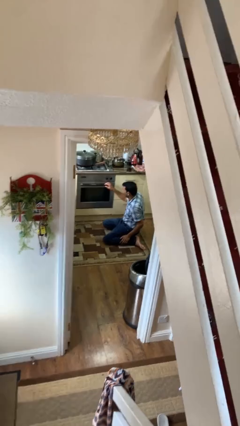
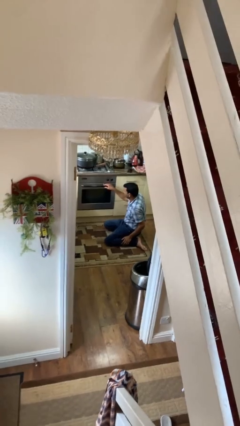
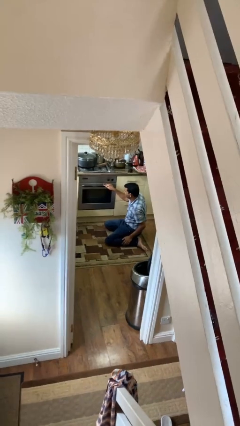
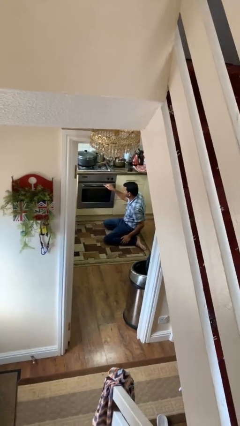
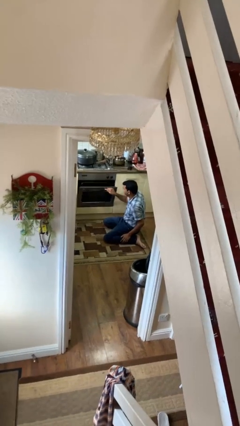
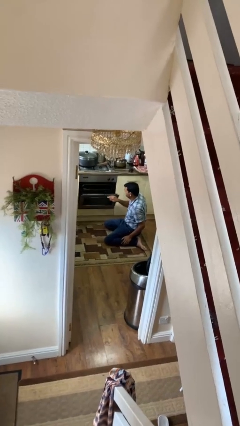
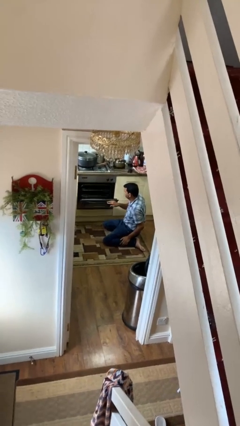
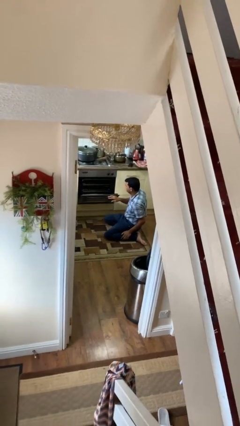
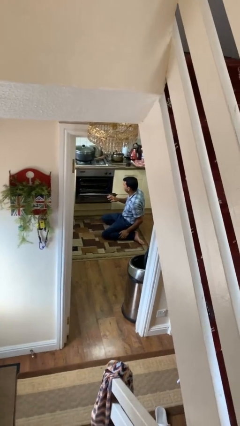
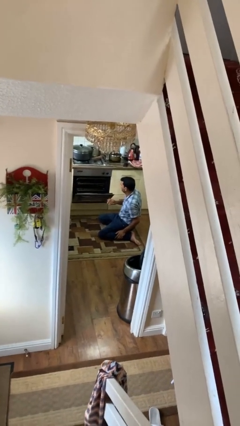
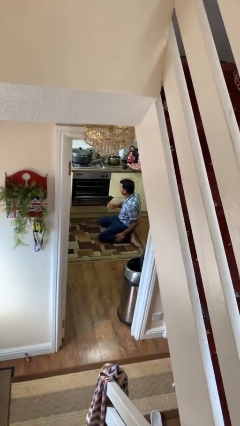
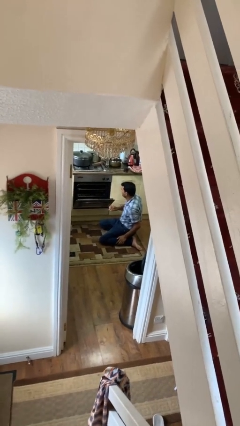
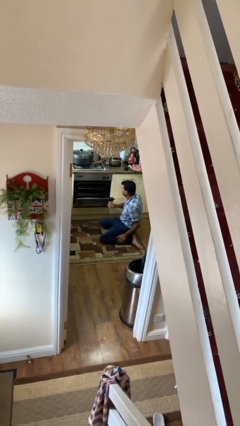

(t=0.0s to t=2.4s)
person opens oven door

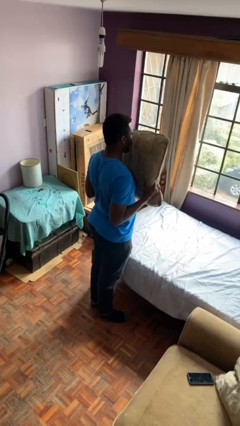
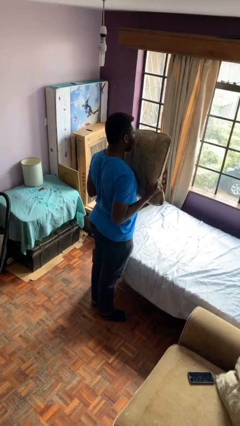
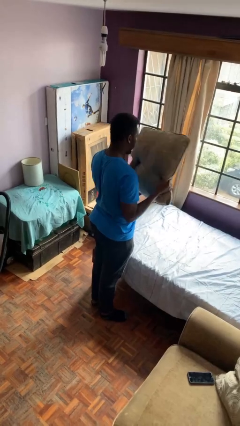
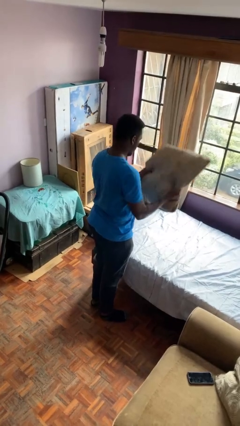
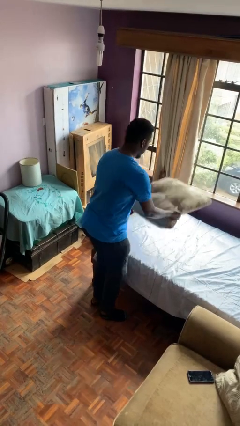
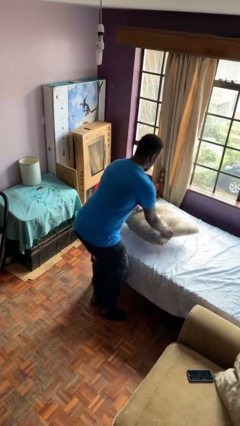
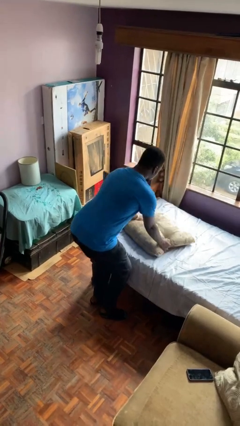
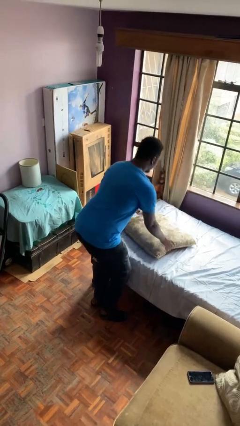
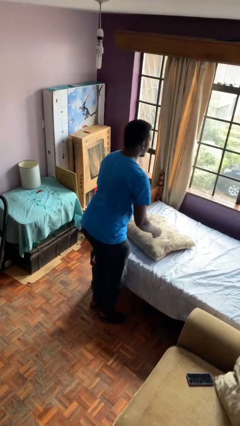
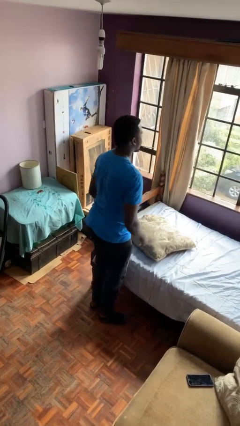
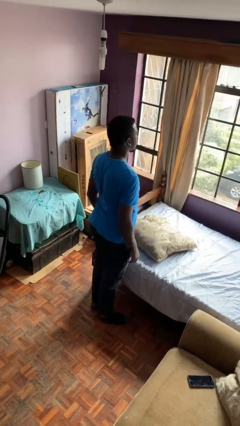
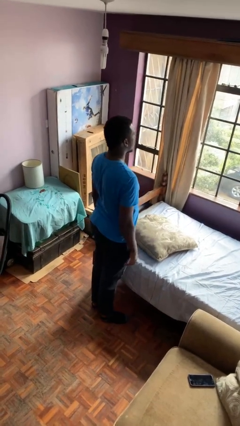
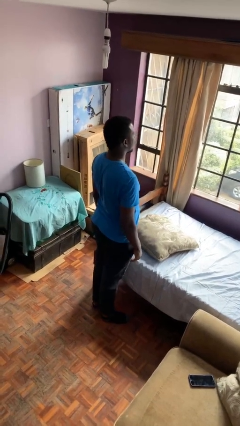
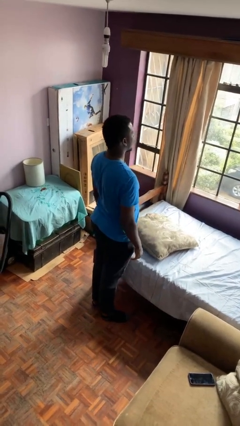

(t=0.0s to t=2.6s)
person puts down object on bed

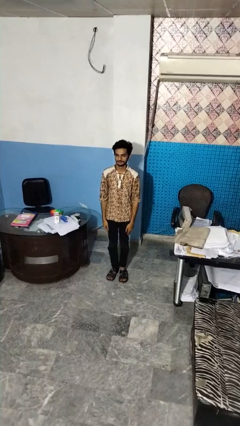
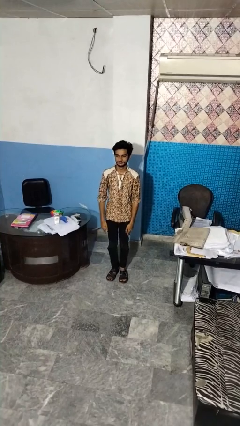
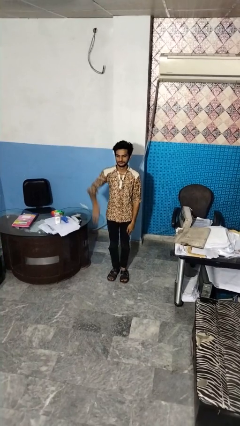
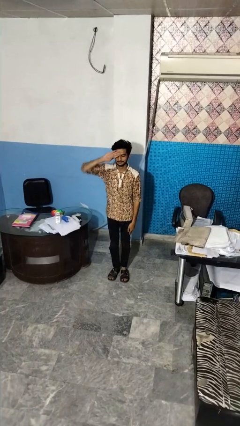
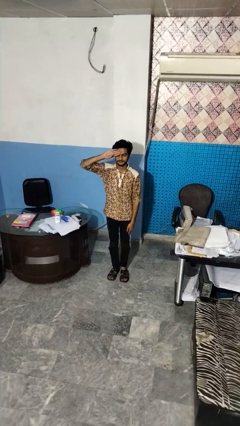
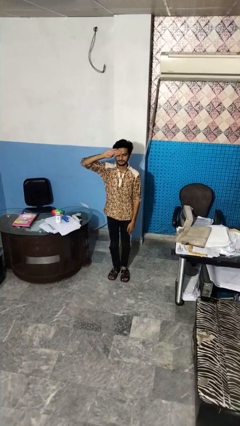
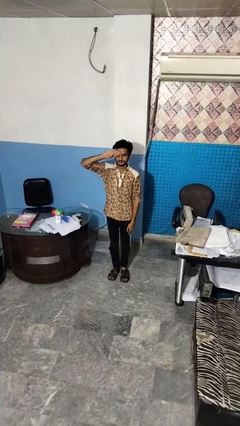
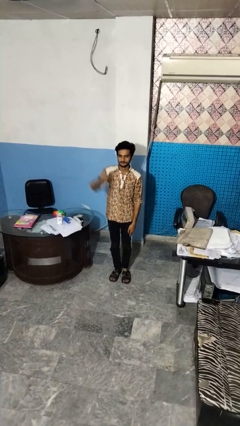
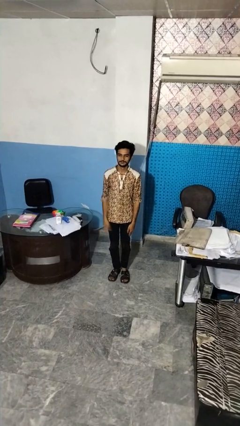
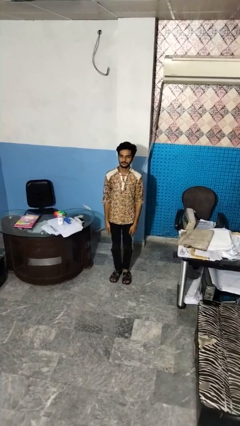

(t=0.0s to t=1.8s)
person salutes

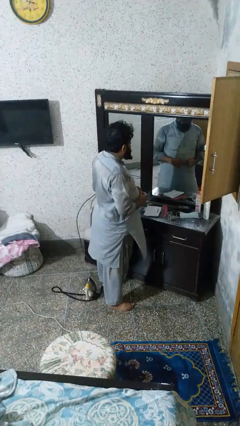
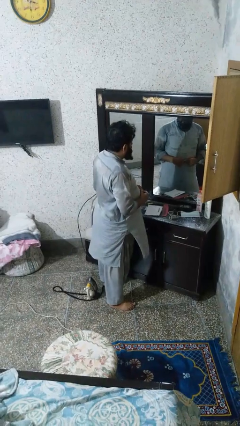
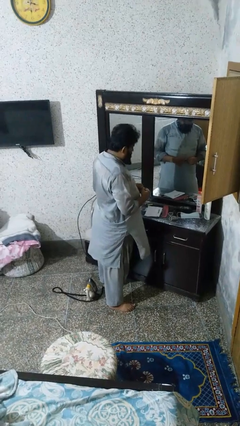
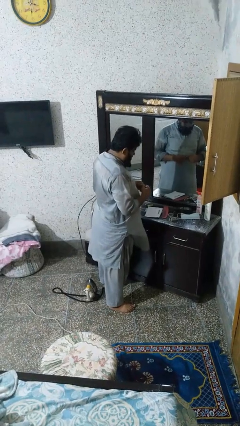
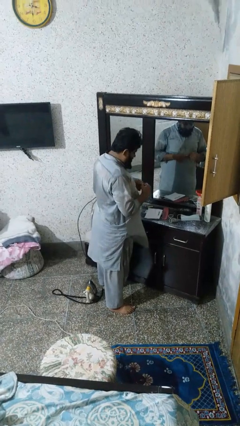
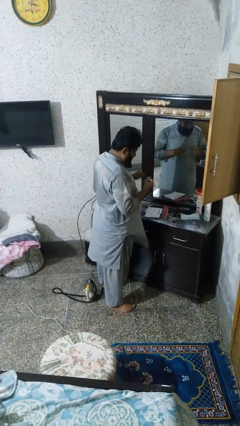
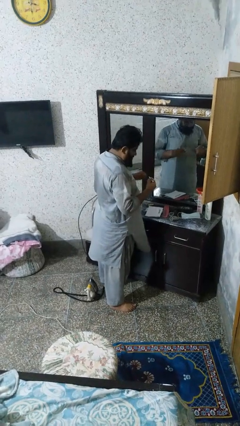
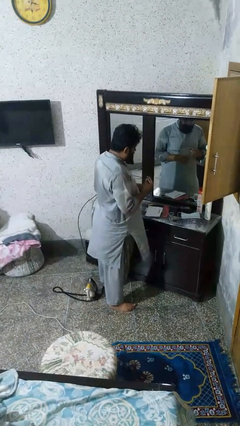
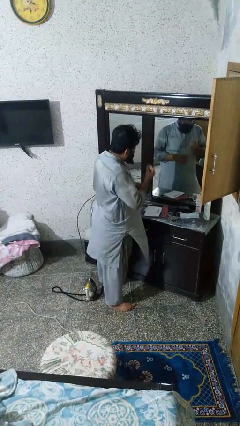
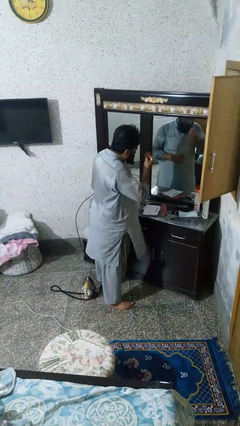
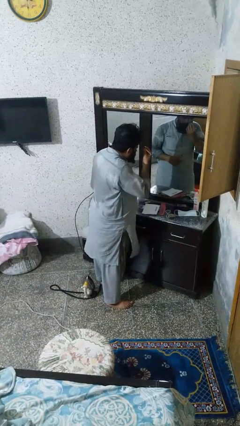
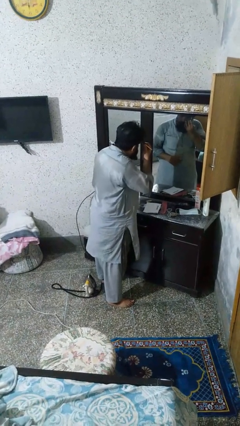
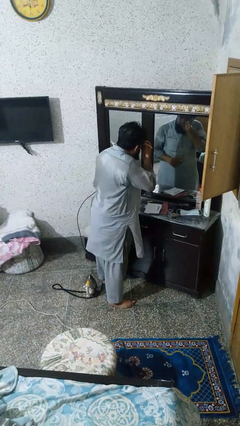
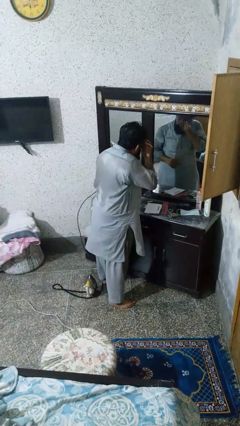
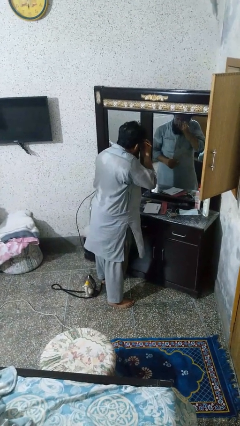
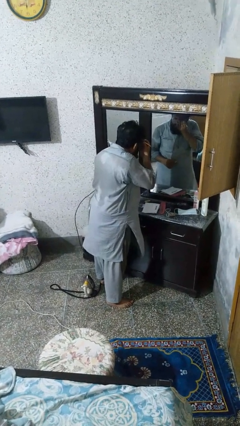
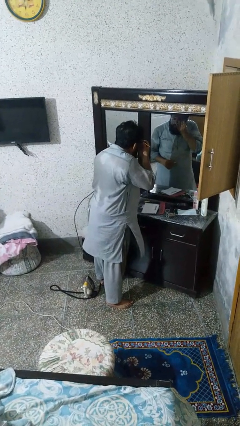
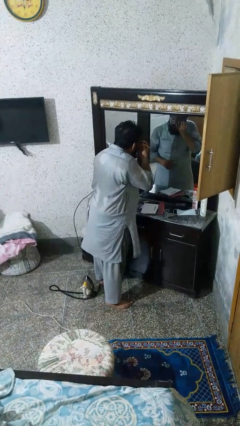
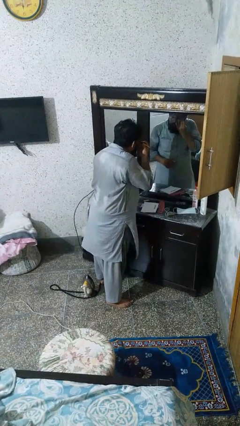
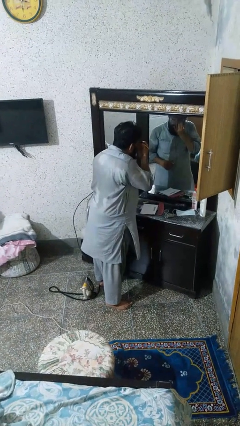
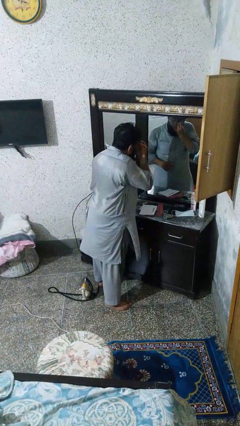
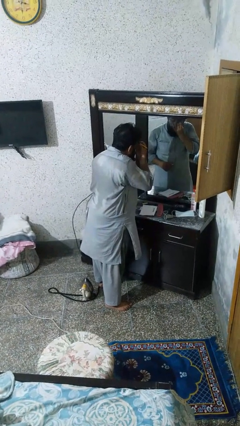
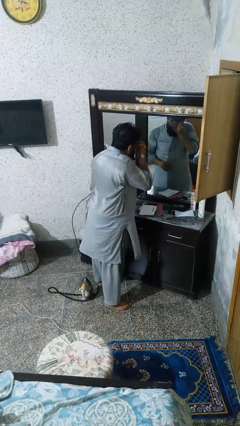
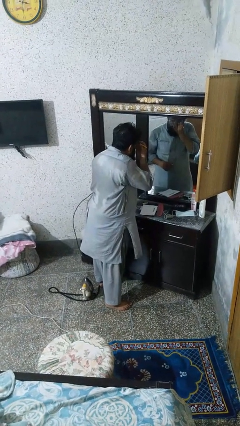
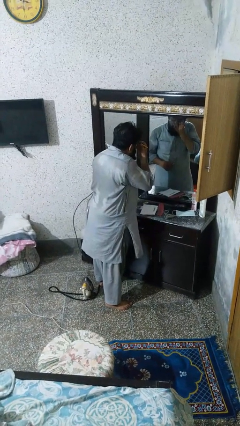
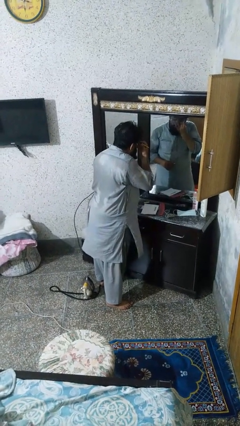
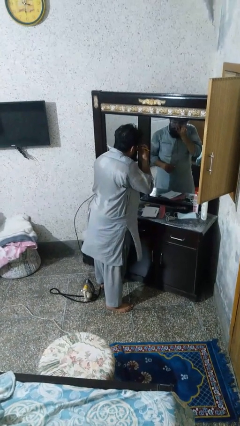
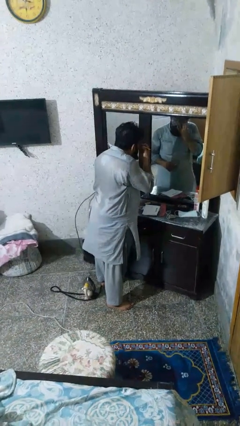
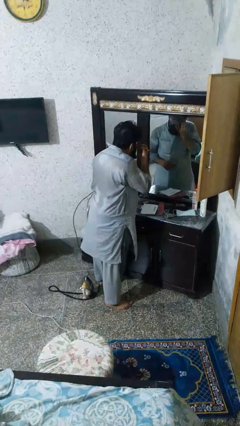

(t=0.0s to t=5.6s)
person applies eye makeup

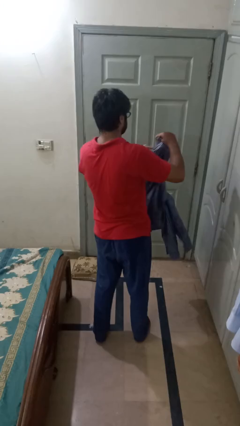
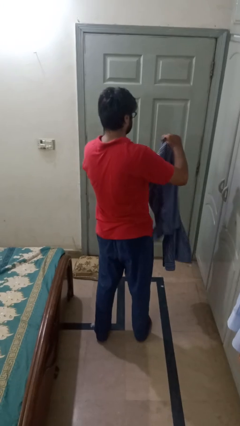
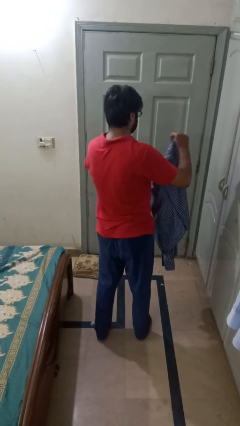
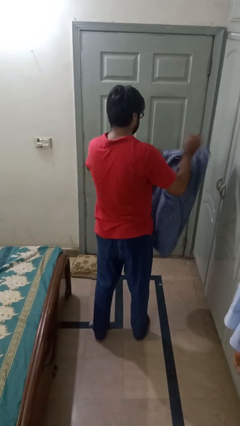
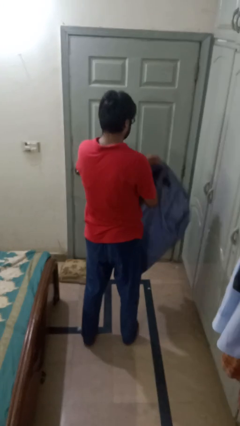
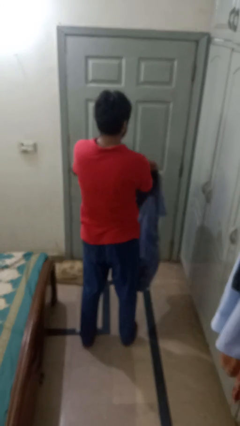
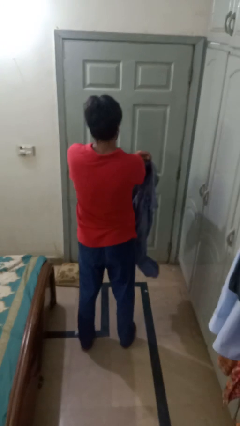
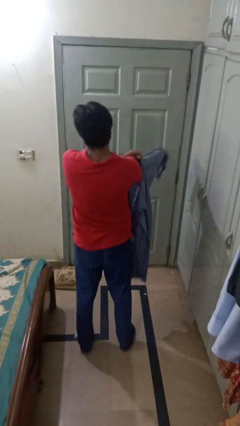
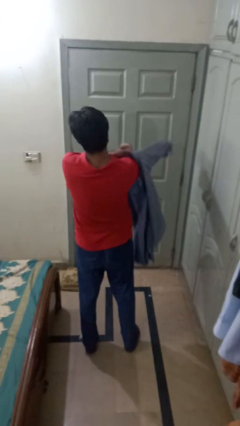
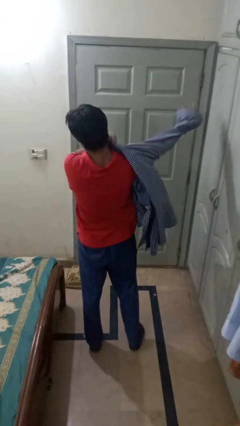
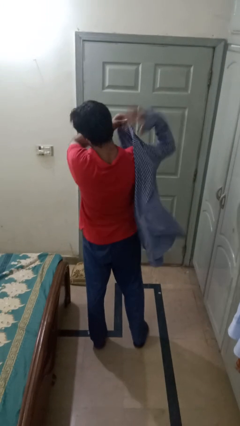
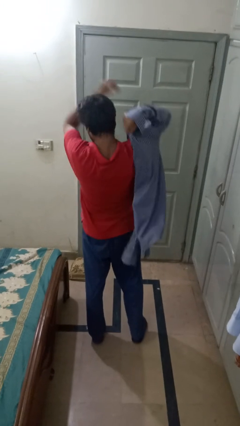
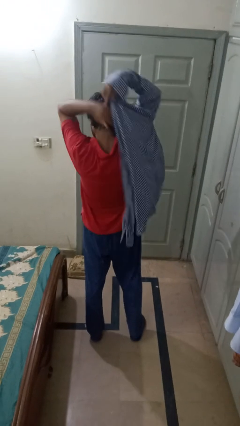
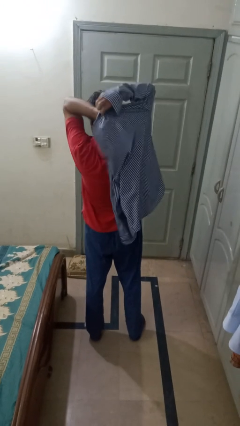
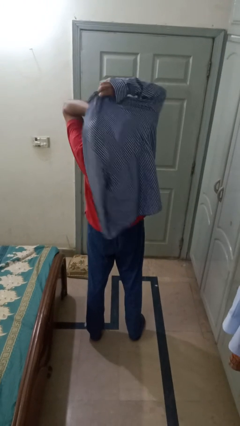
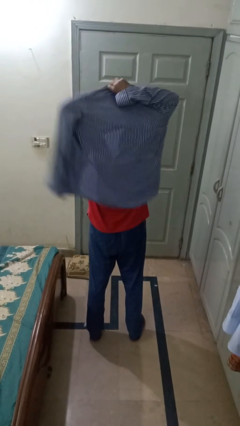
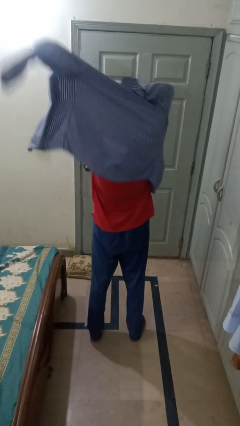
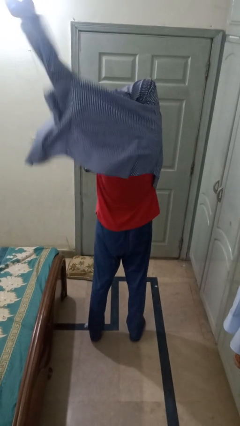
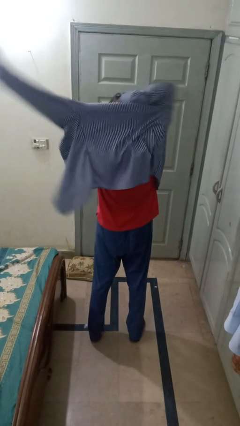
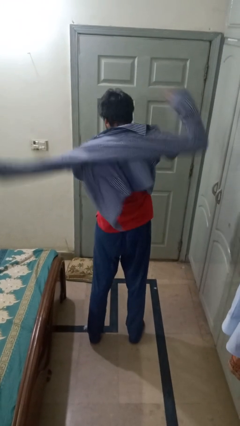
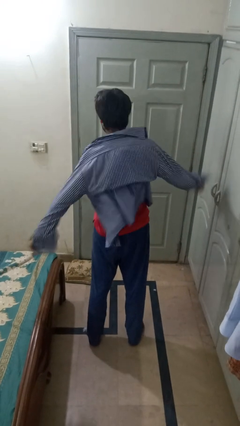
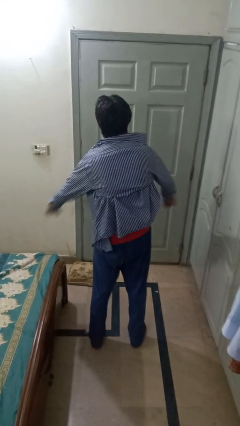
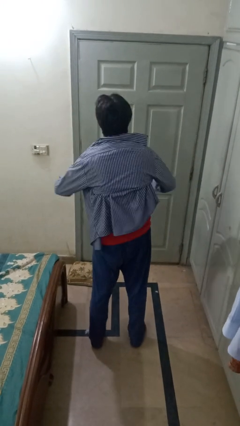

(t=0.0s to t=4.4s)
person puts on shirt

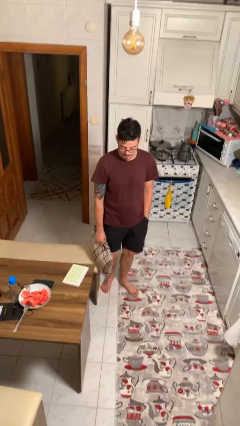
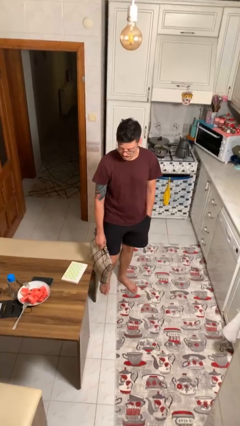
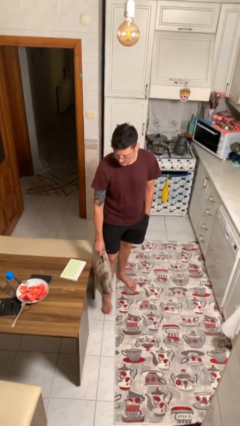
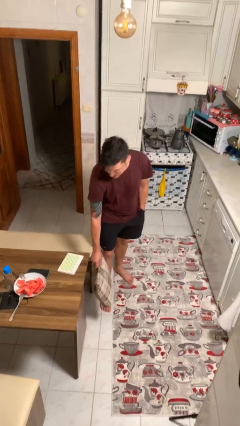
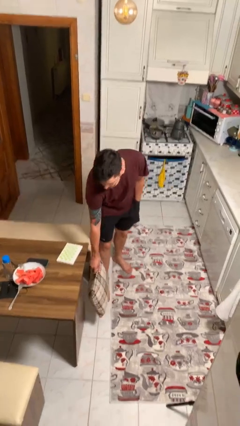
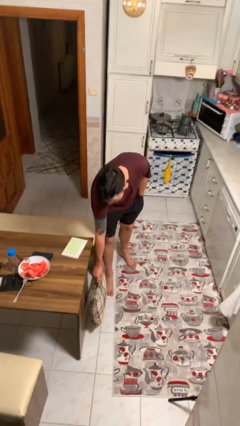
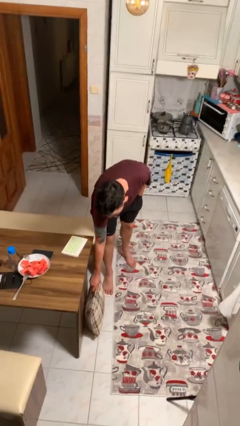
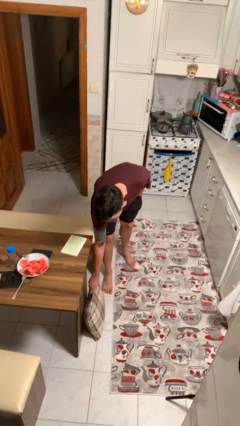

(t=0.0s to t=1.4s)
person puts down object on floor
